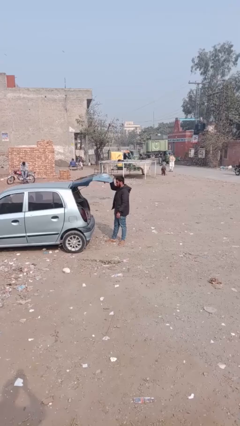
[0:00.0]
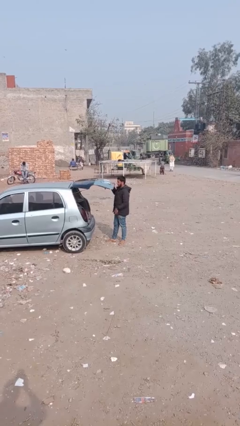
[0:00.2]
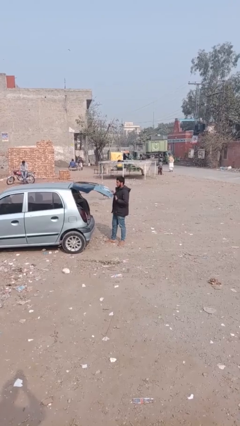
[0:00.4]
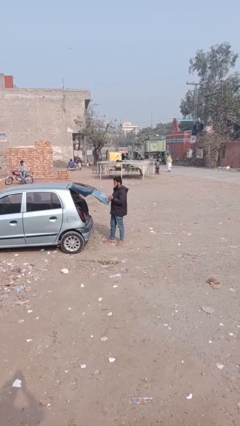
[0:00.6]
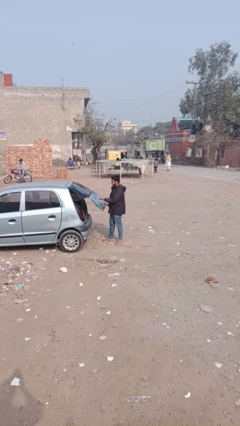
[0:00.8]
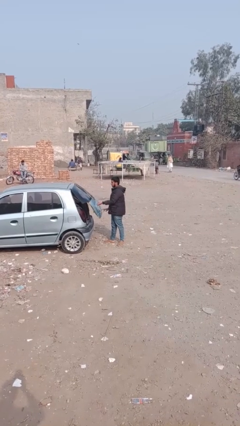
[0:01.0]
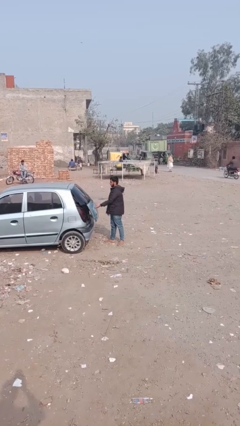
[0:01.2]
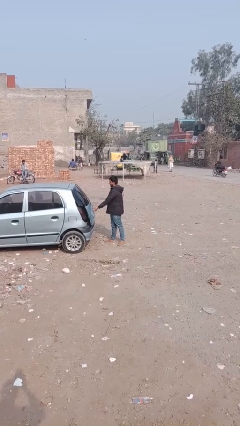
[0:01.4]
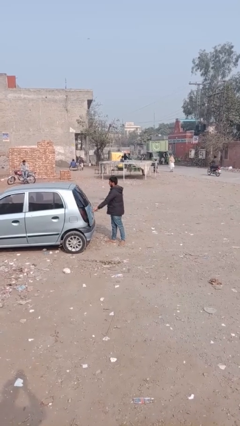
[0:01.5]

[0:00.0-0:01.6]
person closes car trunk

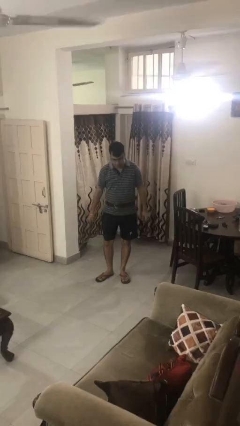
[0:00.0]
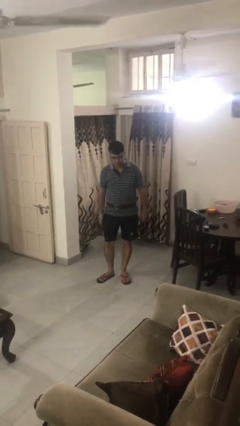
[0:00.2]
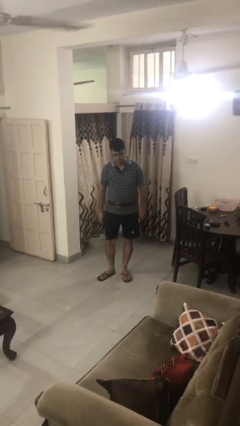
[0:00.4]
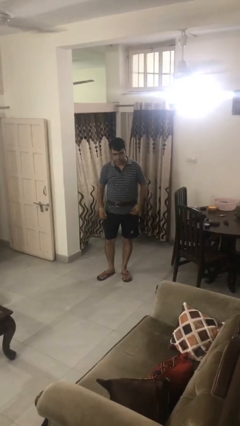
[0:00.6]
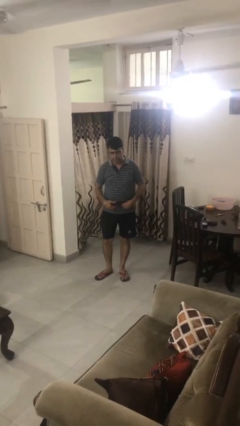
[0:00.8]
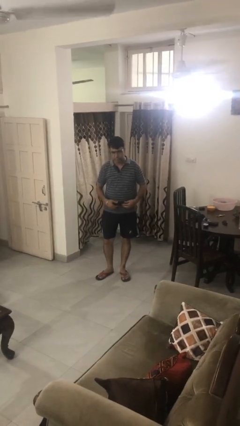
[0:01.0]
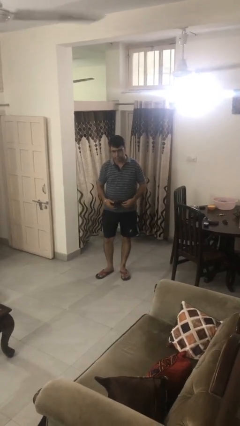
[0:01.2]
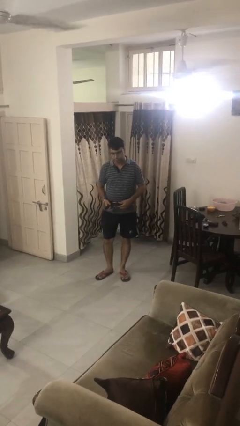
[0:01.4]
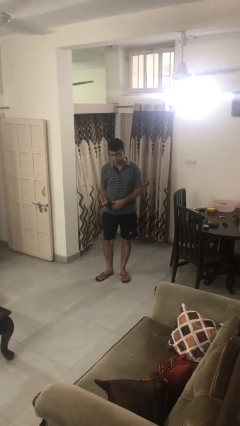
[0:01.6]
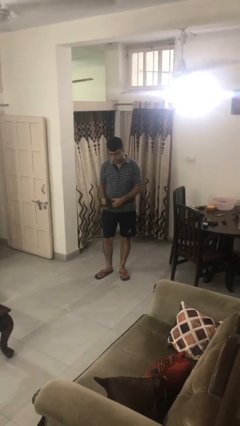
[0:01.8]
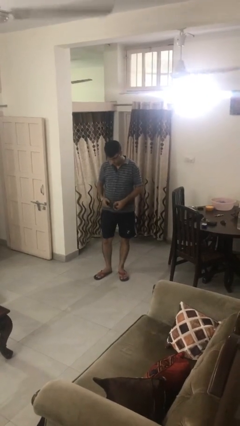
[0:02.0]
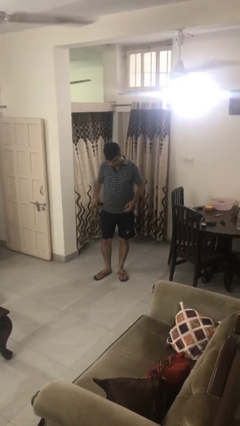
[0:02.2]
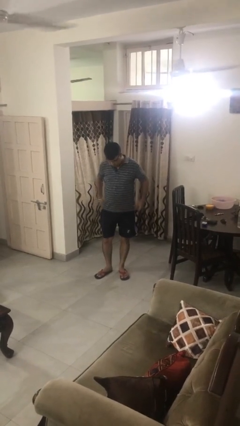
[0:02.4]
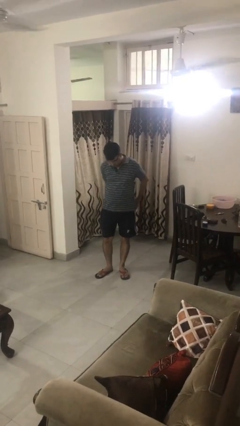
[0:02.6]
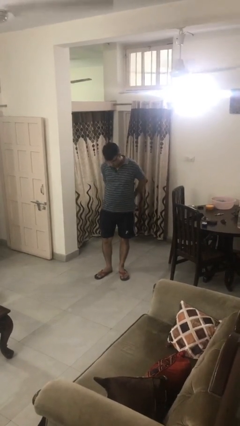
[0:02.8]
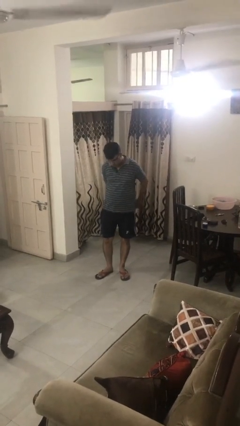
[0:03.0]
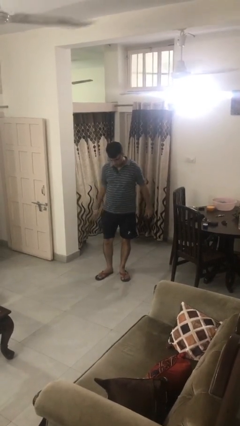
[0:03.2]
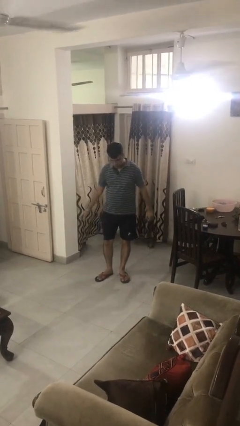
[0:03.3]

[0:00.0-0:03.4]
person takes off belt

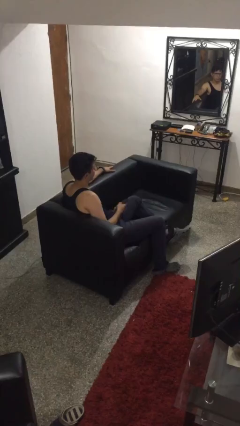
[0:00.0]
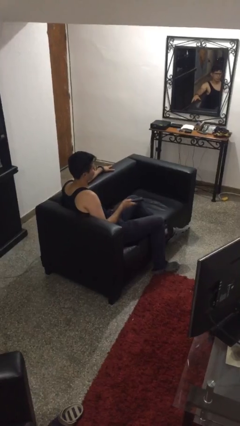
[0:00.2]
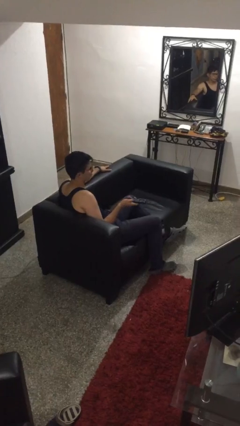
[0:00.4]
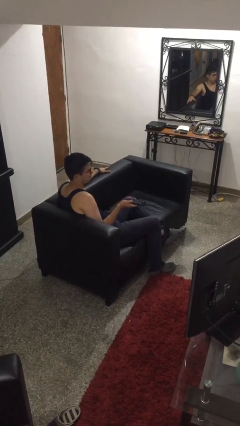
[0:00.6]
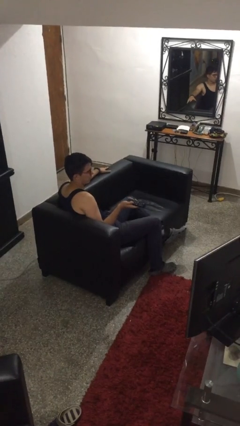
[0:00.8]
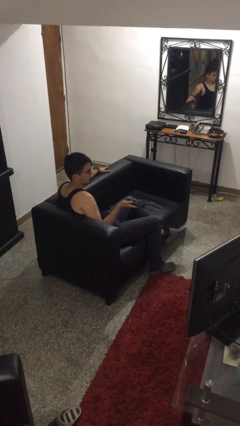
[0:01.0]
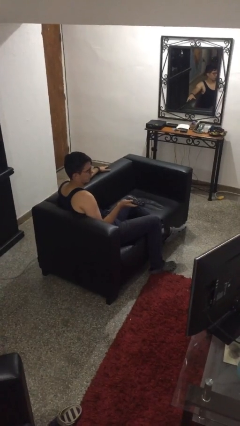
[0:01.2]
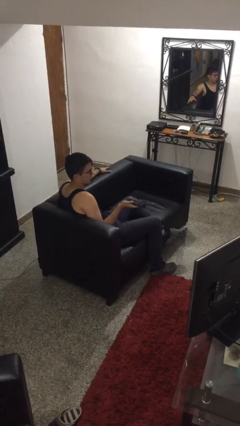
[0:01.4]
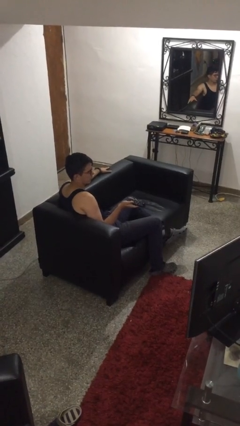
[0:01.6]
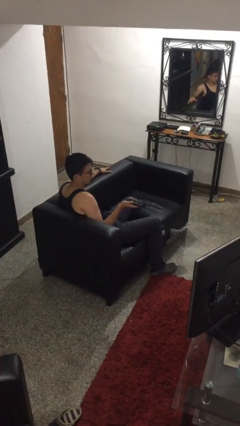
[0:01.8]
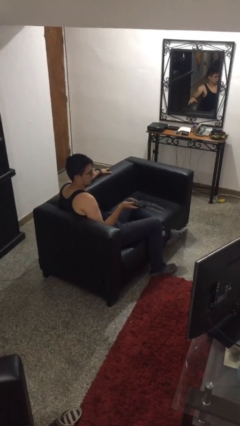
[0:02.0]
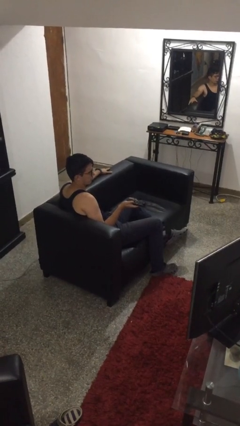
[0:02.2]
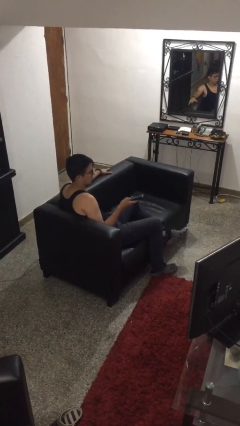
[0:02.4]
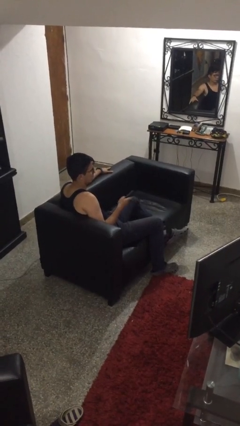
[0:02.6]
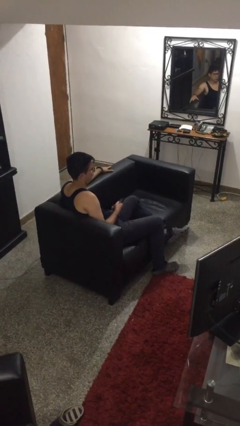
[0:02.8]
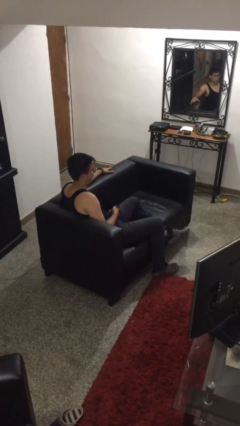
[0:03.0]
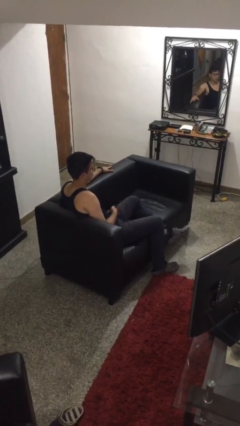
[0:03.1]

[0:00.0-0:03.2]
person uses television remote

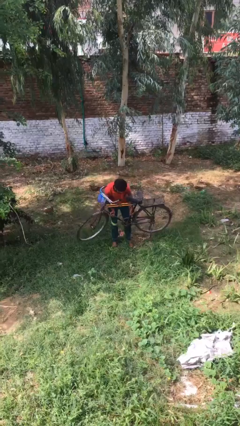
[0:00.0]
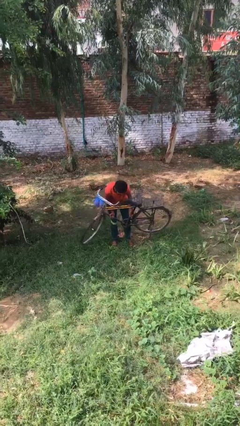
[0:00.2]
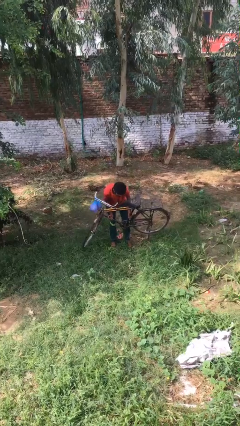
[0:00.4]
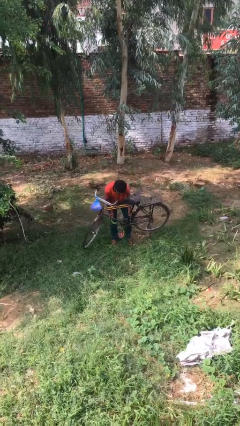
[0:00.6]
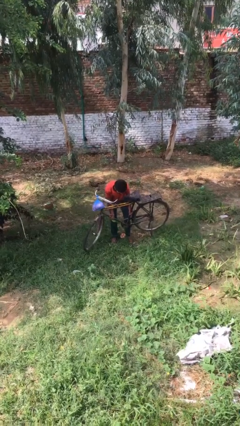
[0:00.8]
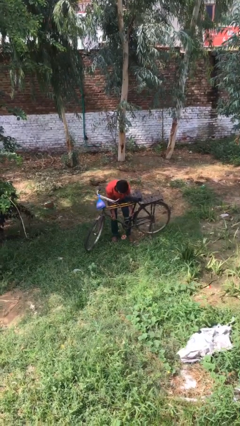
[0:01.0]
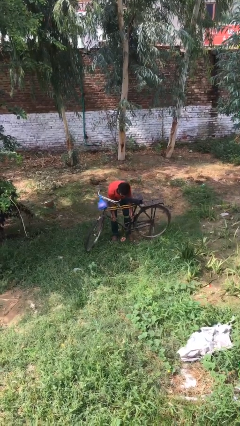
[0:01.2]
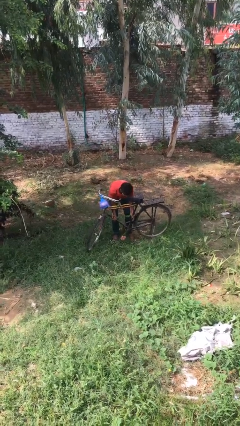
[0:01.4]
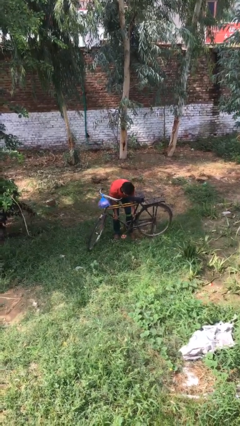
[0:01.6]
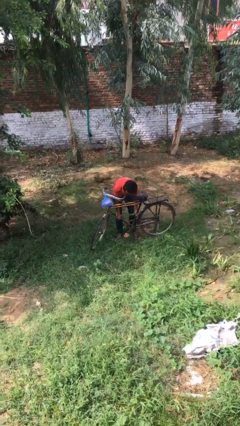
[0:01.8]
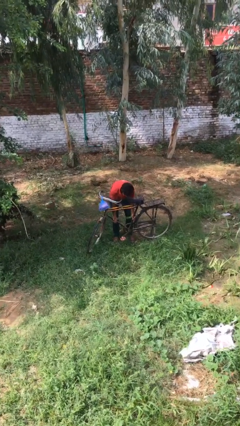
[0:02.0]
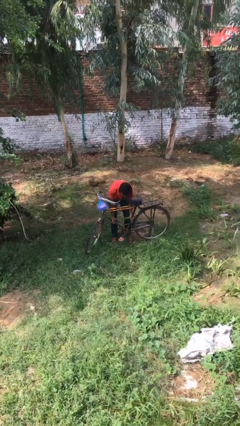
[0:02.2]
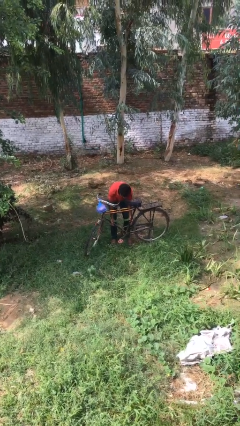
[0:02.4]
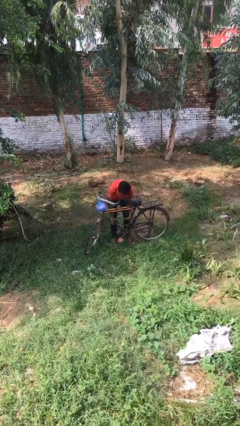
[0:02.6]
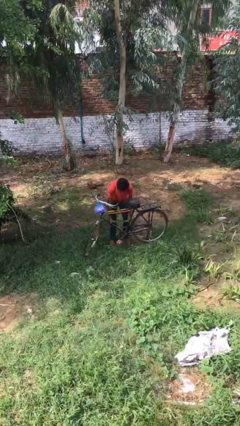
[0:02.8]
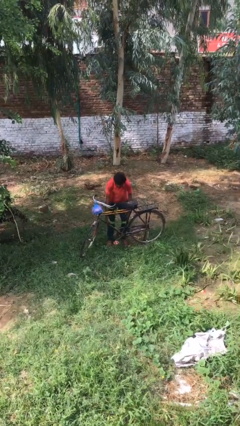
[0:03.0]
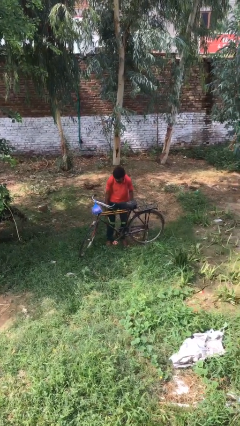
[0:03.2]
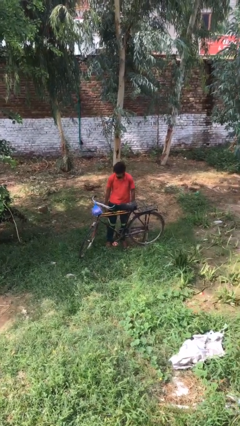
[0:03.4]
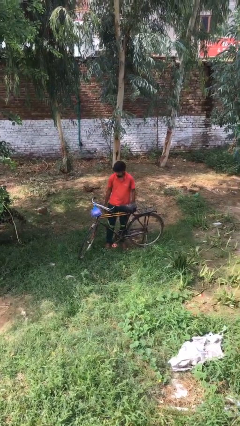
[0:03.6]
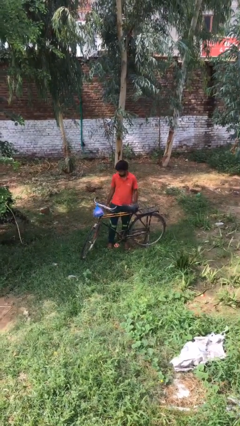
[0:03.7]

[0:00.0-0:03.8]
person puts down object on floor

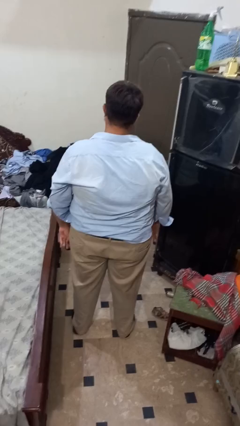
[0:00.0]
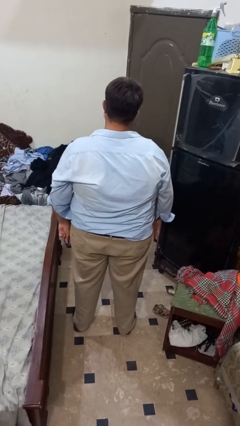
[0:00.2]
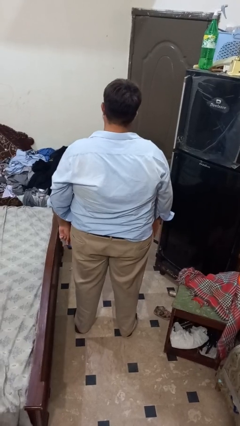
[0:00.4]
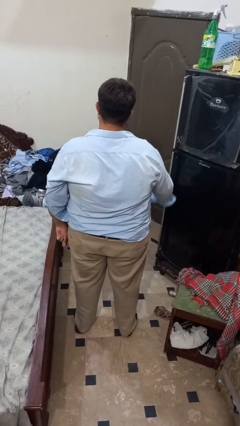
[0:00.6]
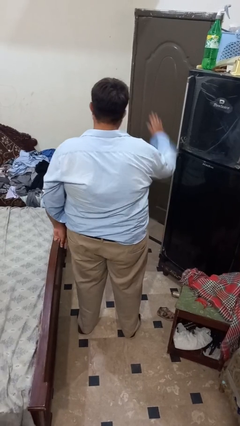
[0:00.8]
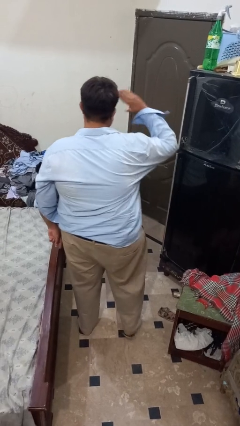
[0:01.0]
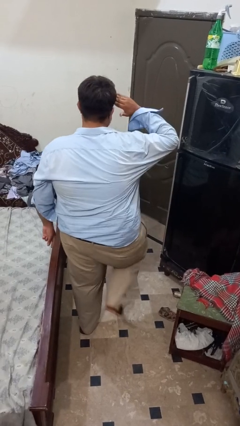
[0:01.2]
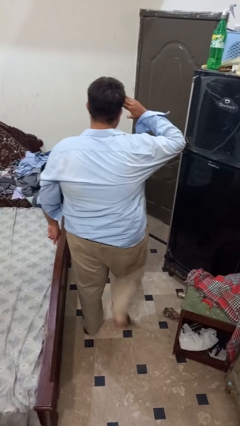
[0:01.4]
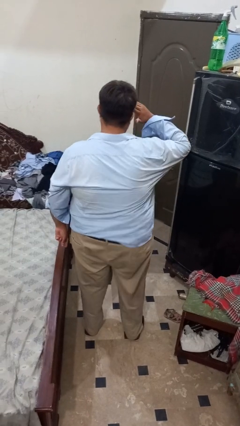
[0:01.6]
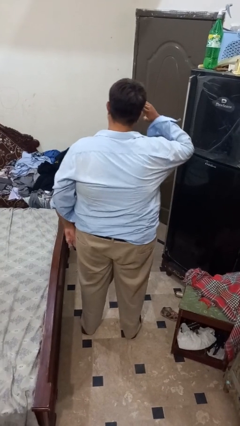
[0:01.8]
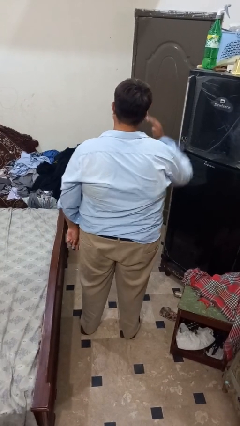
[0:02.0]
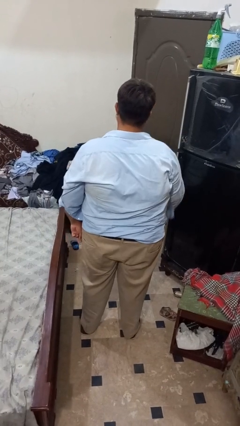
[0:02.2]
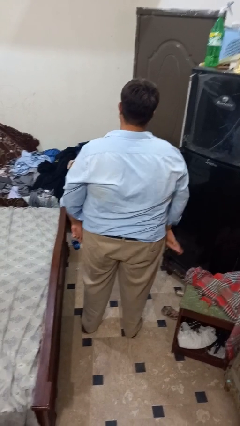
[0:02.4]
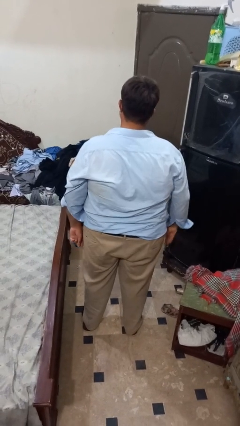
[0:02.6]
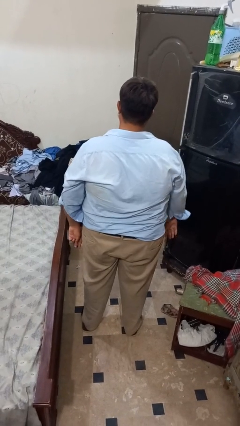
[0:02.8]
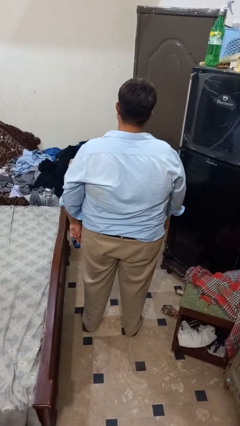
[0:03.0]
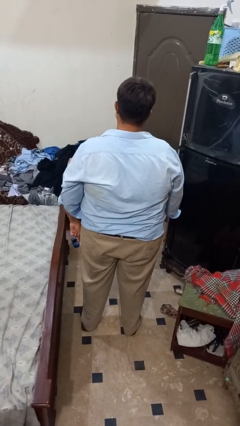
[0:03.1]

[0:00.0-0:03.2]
person salutes

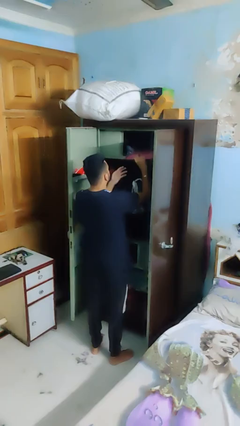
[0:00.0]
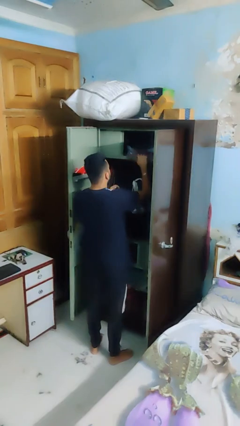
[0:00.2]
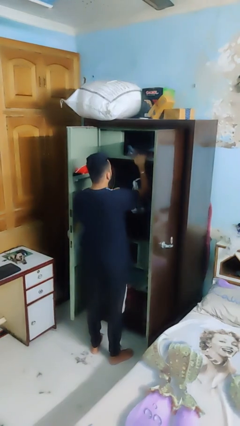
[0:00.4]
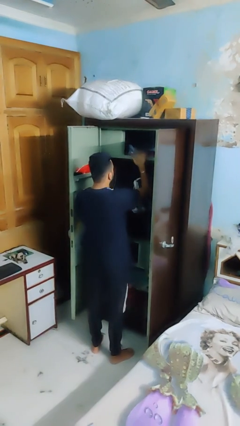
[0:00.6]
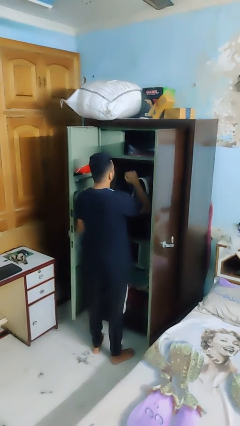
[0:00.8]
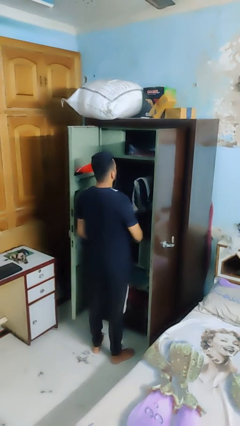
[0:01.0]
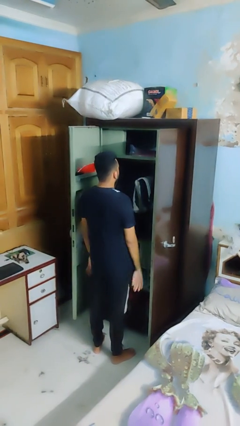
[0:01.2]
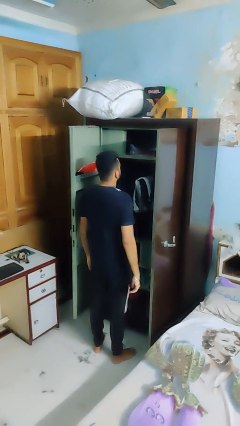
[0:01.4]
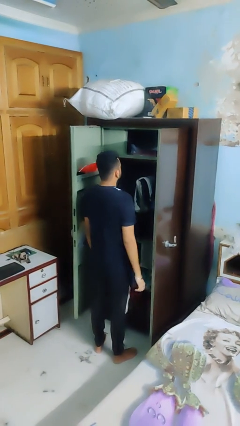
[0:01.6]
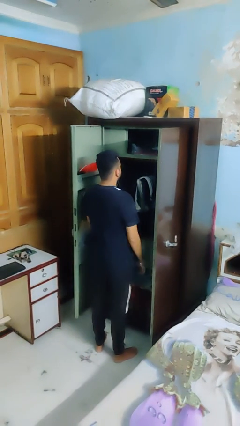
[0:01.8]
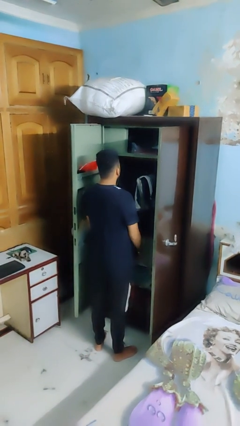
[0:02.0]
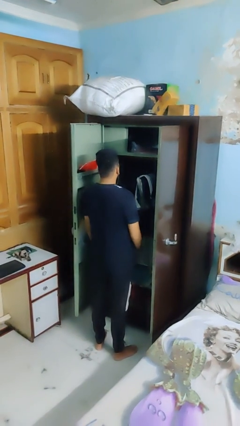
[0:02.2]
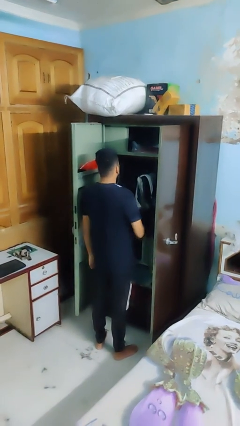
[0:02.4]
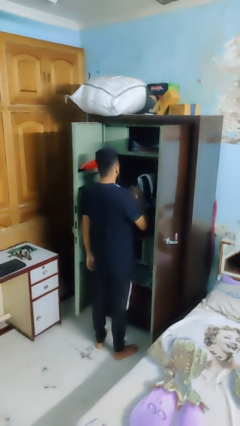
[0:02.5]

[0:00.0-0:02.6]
person puts down object on shelf
